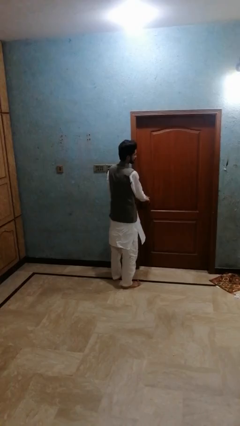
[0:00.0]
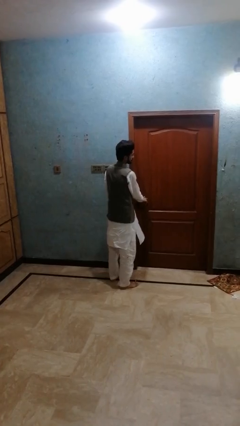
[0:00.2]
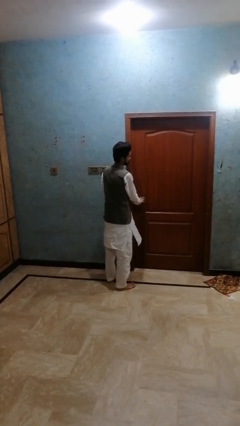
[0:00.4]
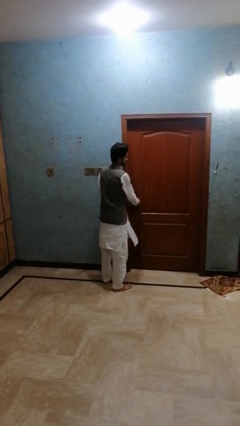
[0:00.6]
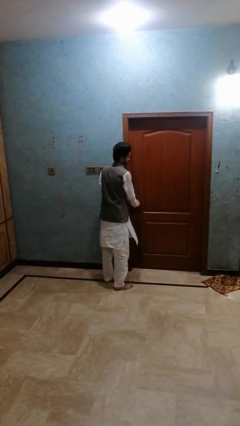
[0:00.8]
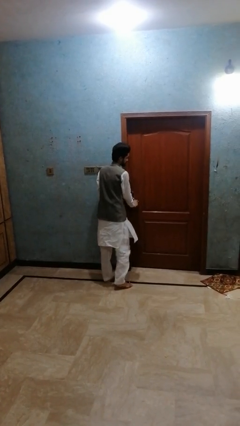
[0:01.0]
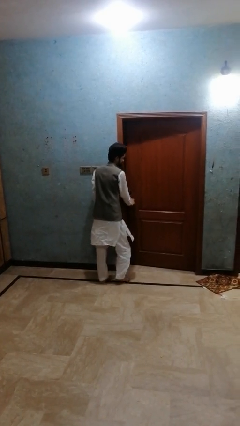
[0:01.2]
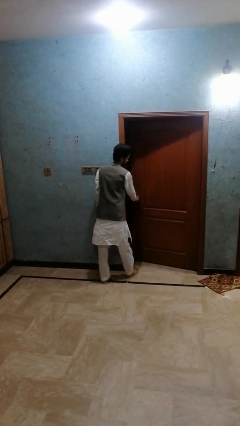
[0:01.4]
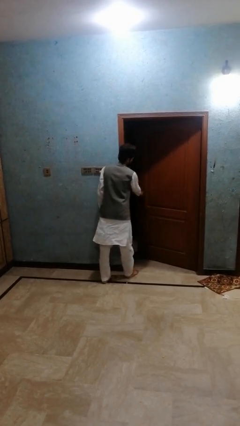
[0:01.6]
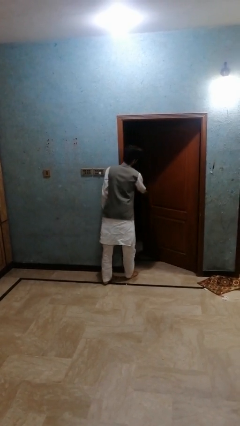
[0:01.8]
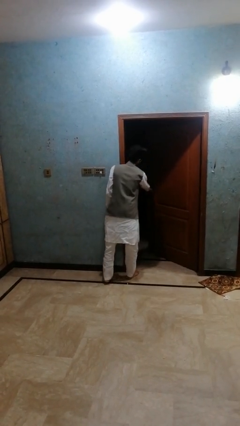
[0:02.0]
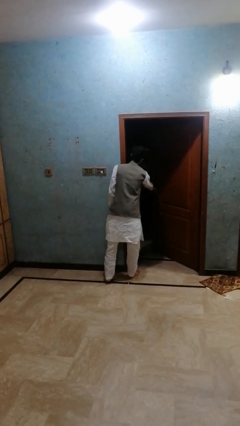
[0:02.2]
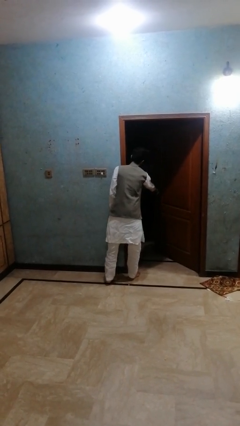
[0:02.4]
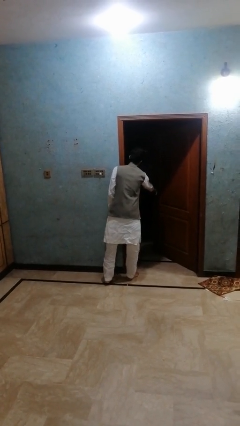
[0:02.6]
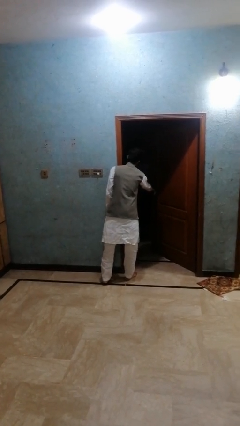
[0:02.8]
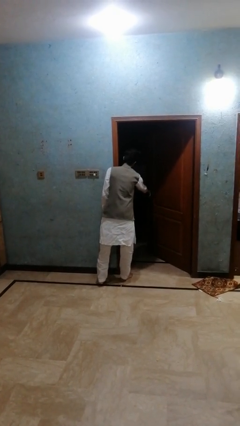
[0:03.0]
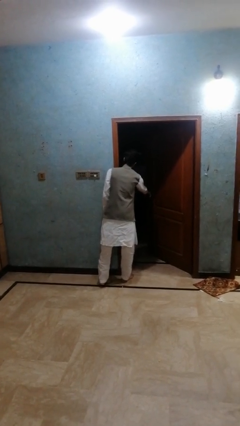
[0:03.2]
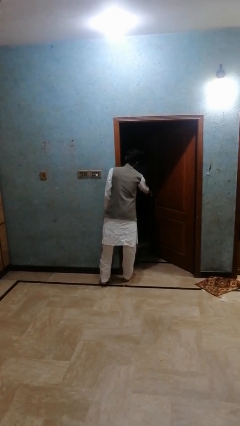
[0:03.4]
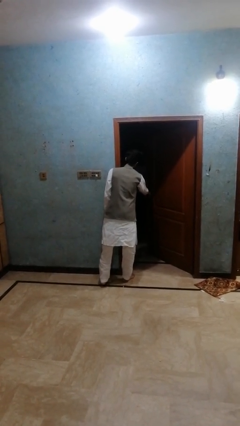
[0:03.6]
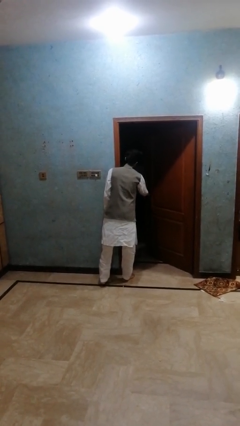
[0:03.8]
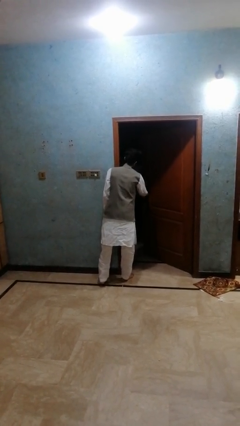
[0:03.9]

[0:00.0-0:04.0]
person opens closet door

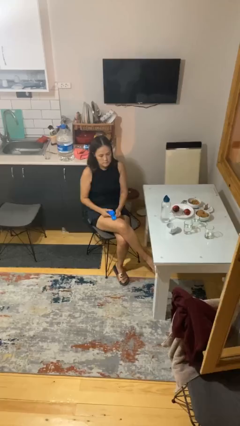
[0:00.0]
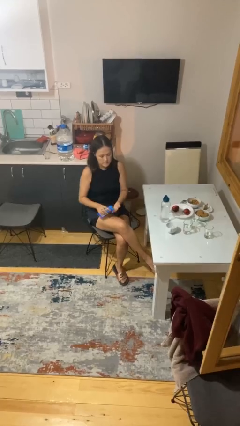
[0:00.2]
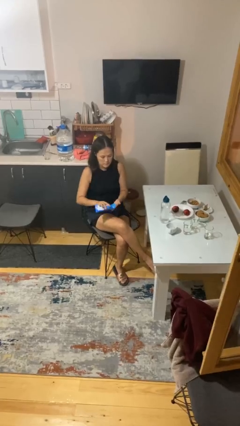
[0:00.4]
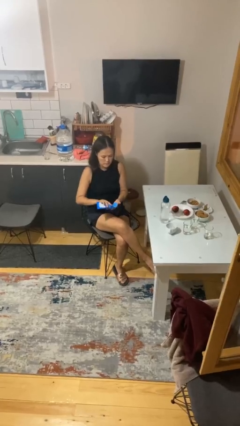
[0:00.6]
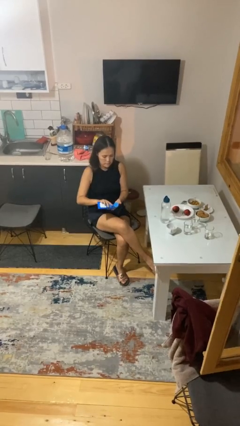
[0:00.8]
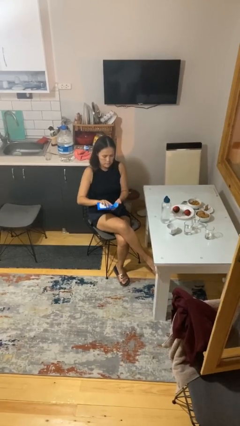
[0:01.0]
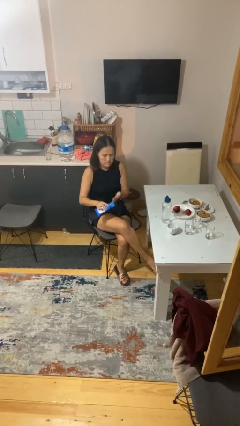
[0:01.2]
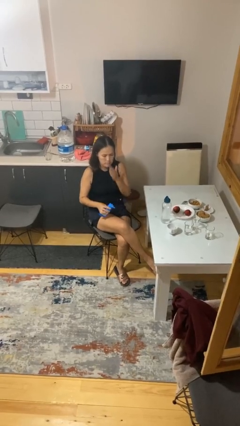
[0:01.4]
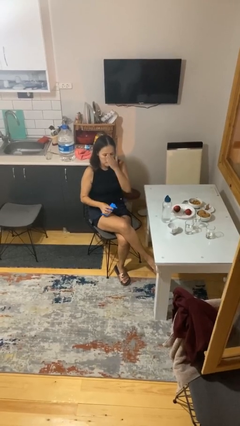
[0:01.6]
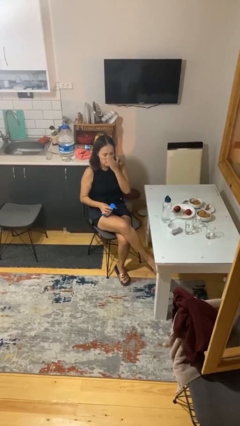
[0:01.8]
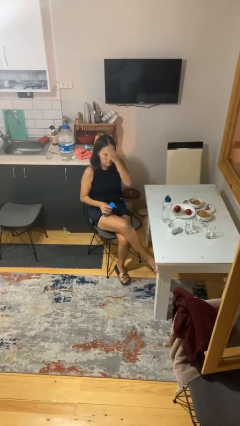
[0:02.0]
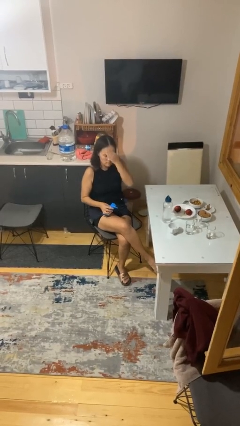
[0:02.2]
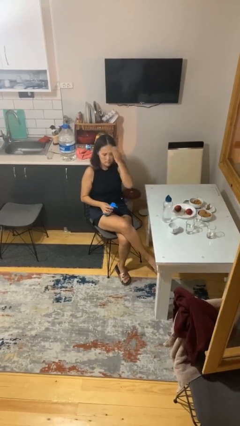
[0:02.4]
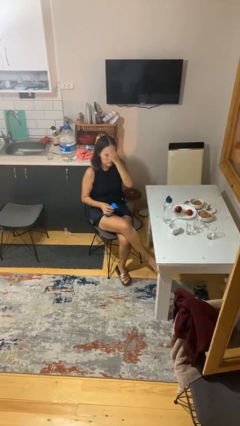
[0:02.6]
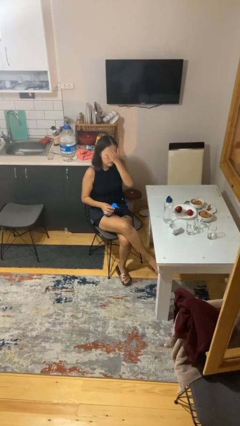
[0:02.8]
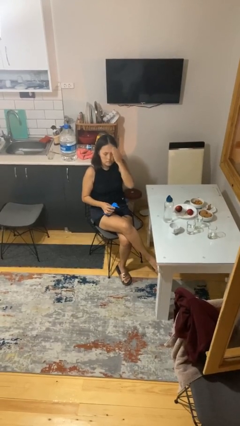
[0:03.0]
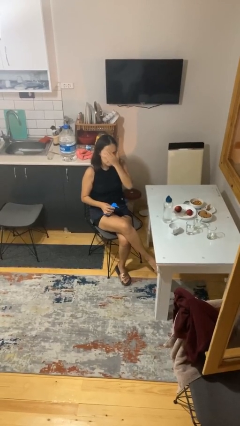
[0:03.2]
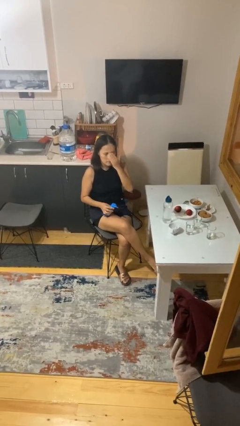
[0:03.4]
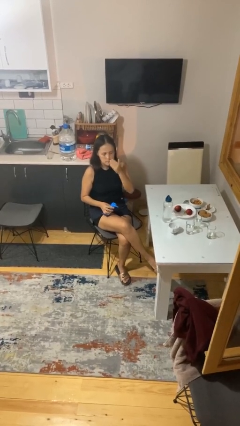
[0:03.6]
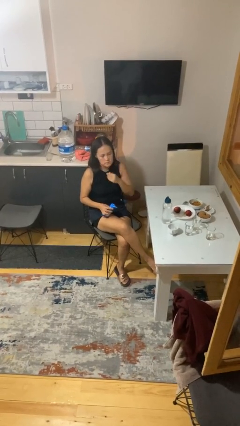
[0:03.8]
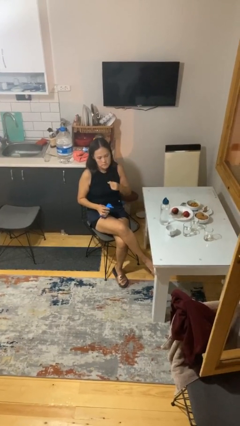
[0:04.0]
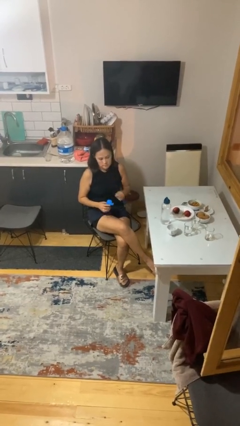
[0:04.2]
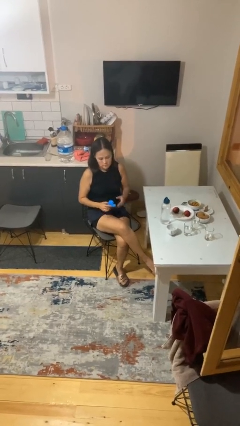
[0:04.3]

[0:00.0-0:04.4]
person applies facial moisturizer

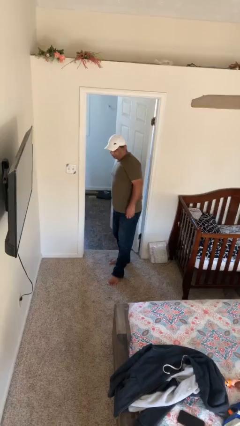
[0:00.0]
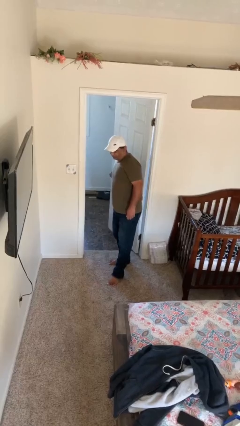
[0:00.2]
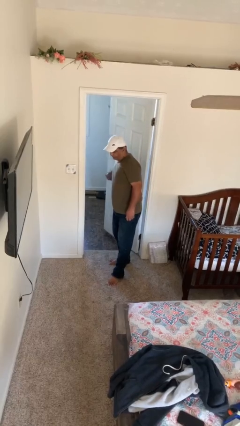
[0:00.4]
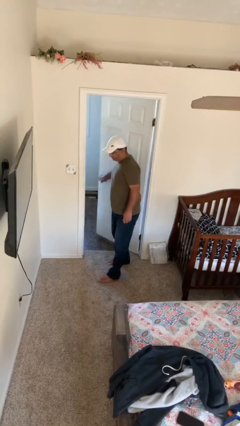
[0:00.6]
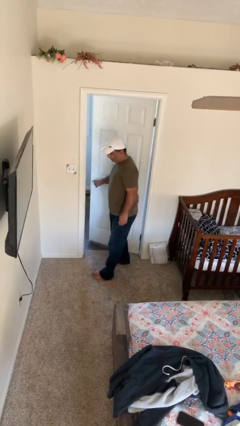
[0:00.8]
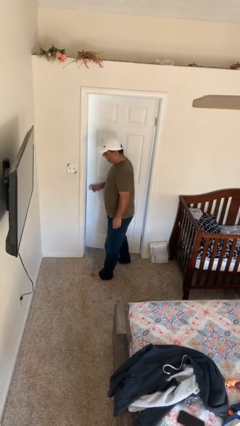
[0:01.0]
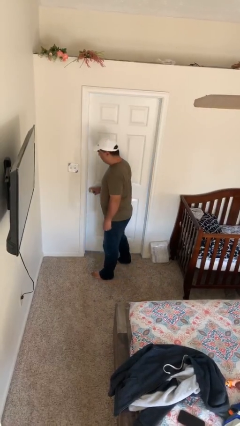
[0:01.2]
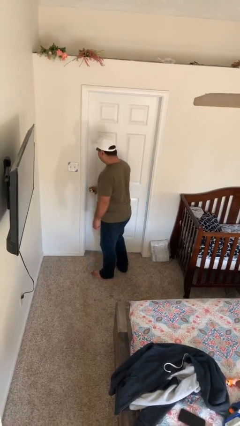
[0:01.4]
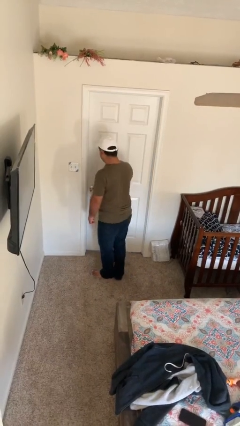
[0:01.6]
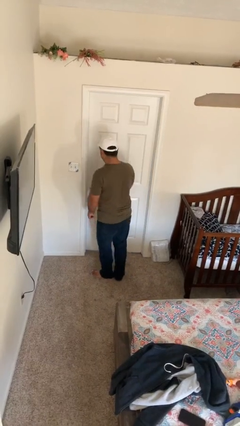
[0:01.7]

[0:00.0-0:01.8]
person closes facility door

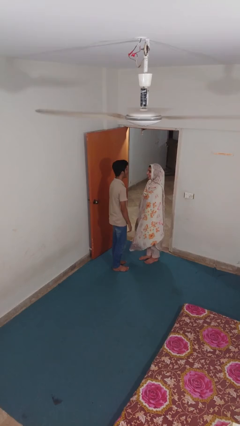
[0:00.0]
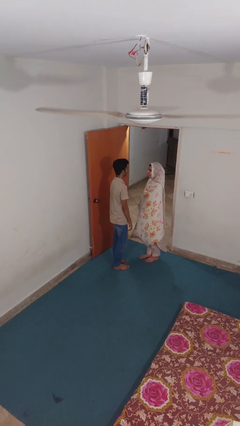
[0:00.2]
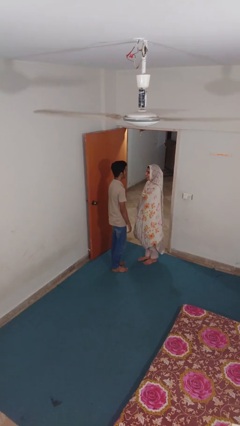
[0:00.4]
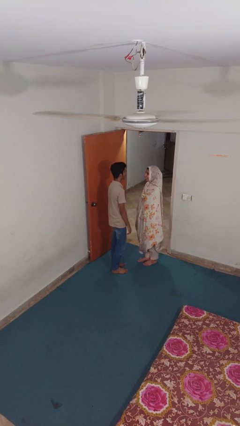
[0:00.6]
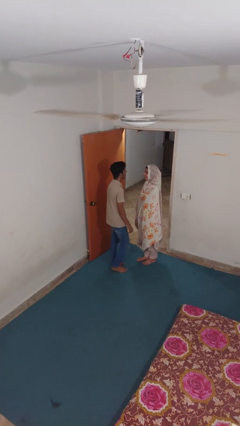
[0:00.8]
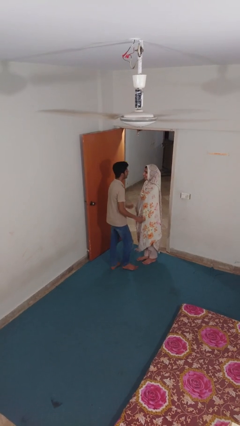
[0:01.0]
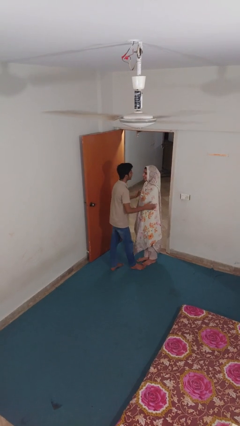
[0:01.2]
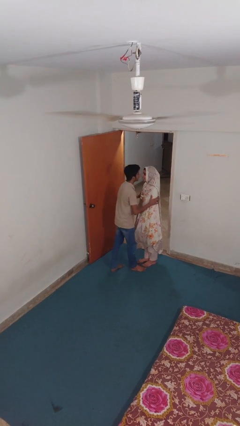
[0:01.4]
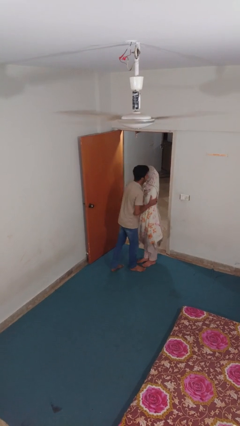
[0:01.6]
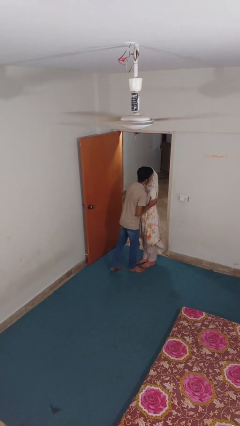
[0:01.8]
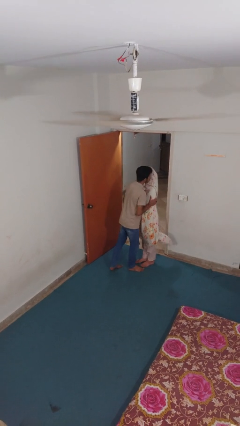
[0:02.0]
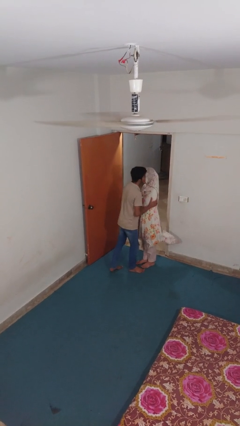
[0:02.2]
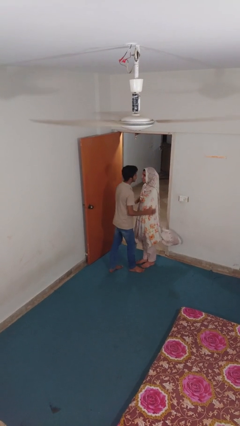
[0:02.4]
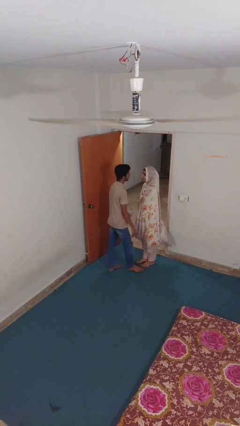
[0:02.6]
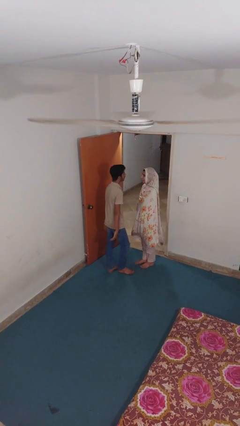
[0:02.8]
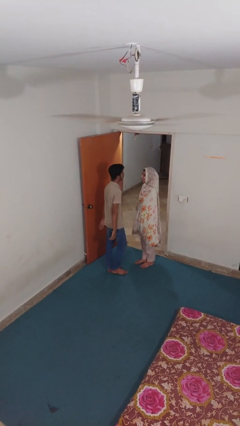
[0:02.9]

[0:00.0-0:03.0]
person kisses cheek of person

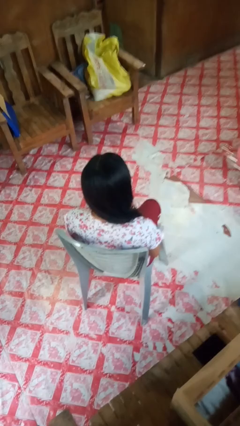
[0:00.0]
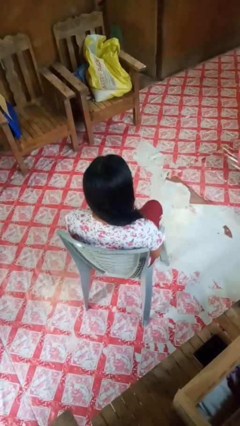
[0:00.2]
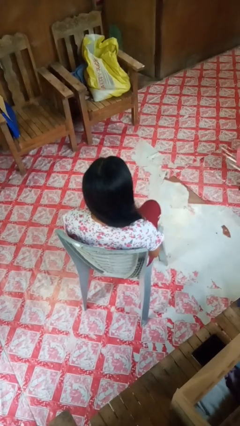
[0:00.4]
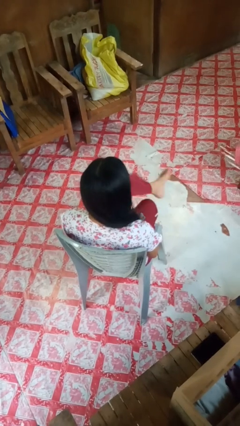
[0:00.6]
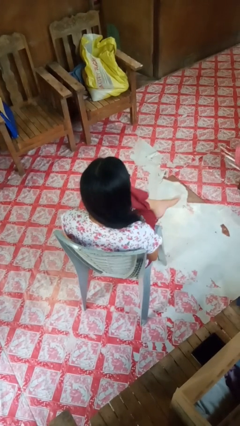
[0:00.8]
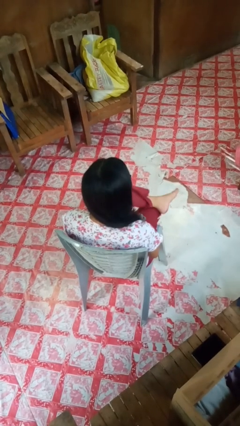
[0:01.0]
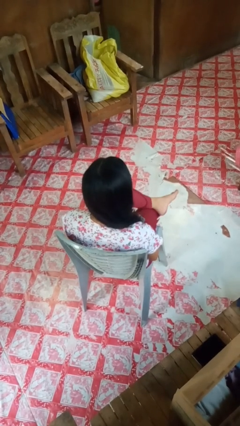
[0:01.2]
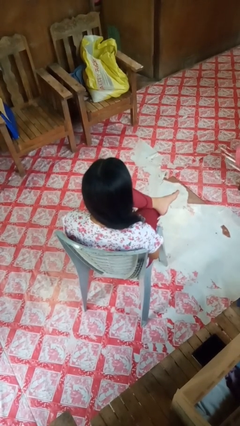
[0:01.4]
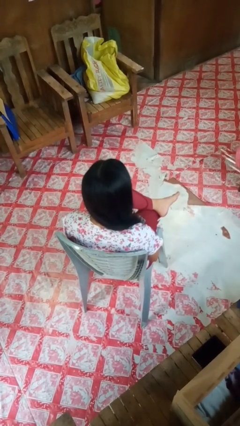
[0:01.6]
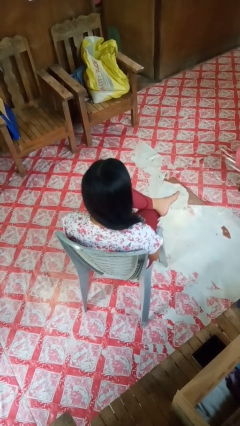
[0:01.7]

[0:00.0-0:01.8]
person crosses legs

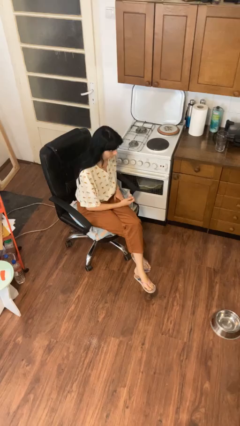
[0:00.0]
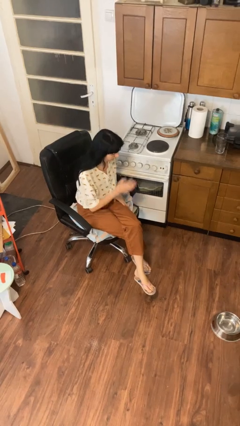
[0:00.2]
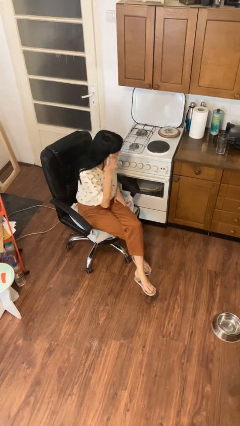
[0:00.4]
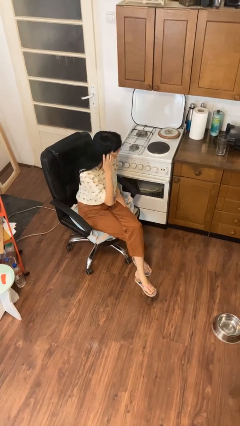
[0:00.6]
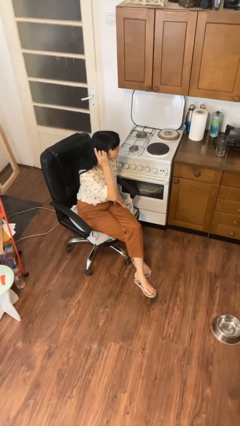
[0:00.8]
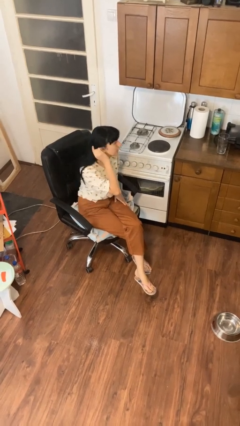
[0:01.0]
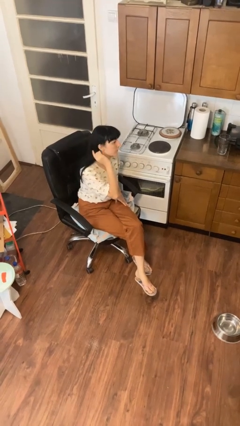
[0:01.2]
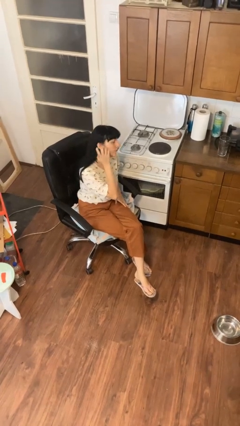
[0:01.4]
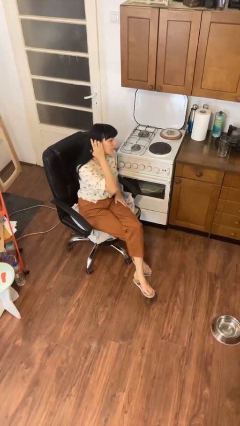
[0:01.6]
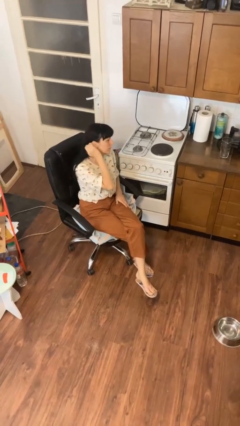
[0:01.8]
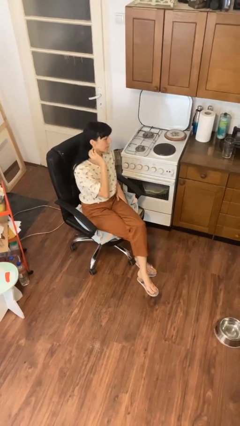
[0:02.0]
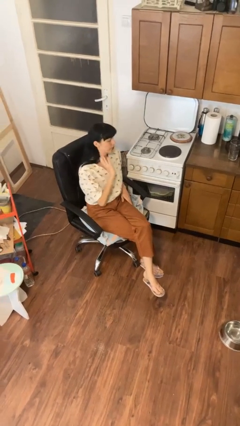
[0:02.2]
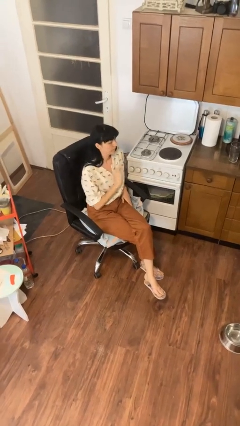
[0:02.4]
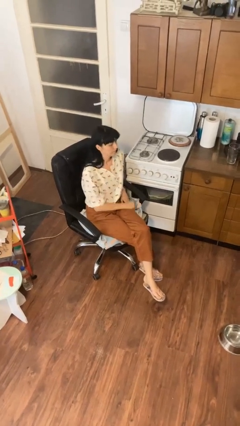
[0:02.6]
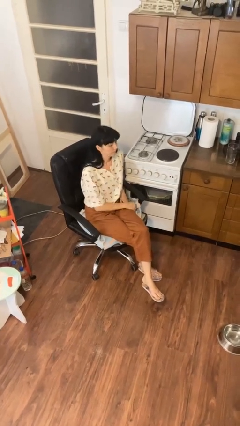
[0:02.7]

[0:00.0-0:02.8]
person strokes hair
